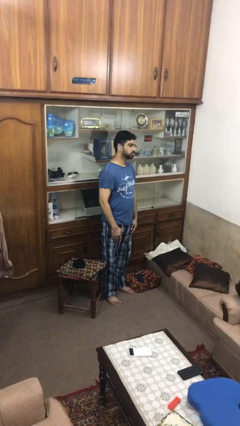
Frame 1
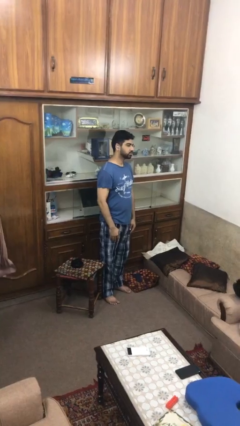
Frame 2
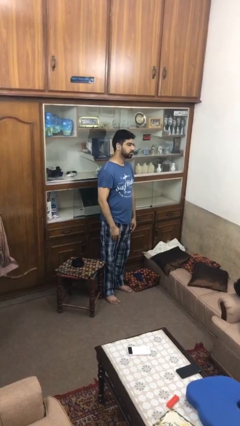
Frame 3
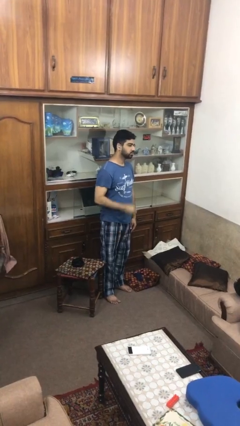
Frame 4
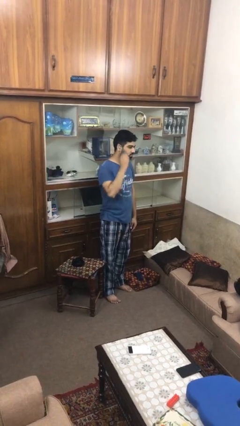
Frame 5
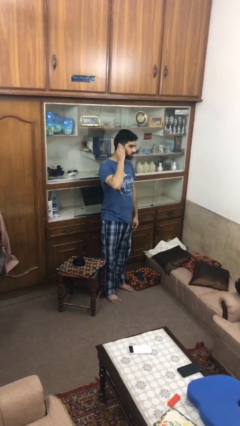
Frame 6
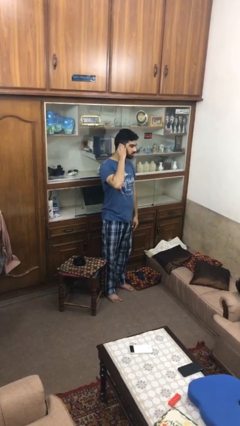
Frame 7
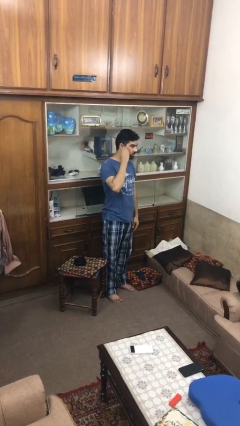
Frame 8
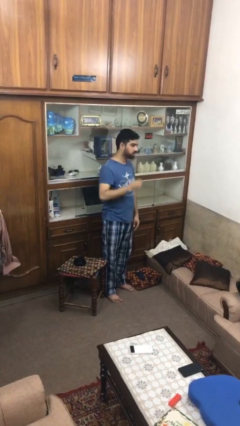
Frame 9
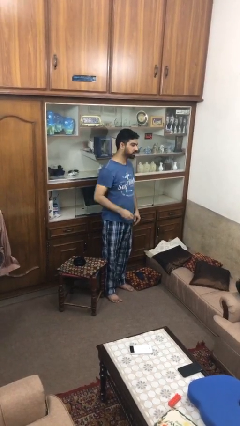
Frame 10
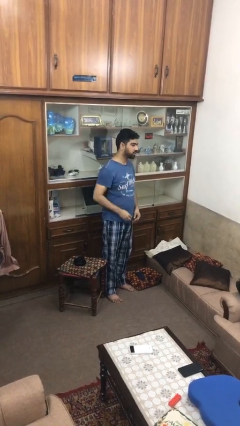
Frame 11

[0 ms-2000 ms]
person takes off earrings

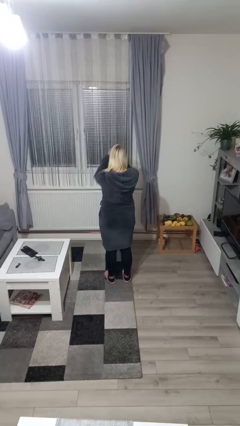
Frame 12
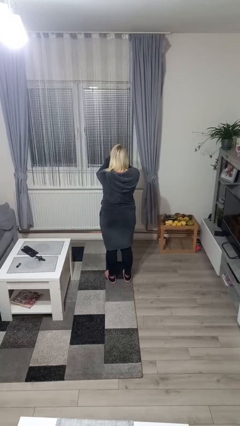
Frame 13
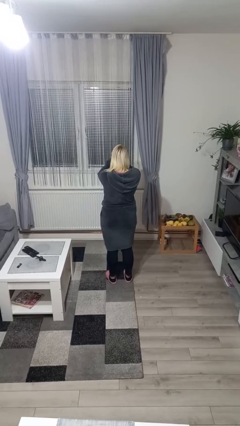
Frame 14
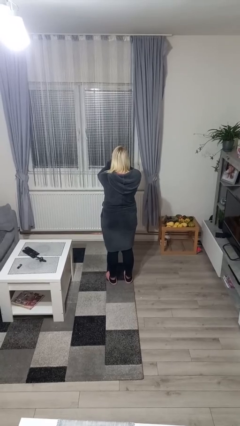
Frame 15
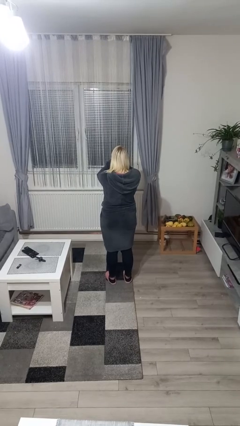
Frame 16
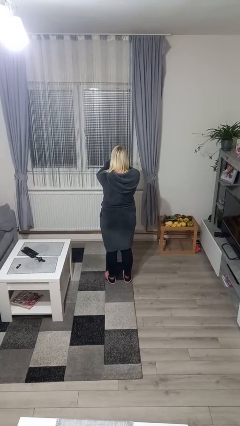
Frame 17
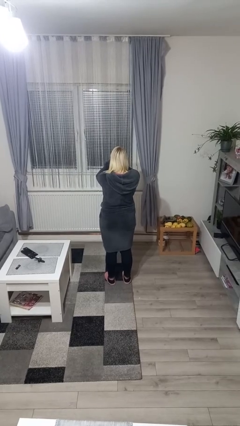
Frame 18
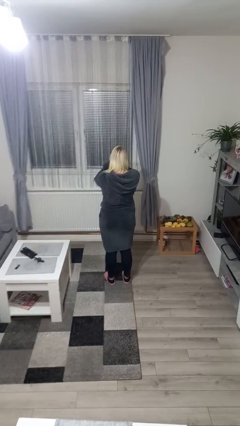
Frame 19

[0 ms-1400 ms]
person covers face with hands

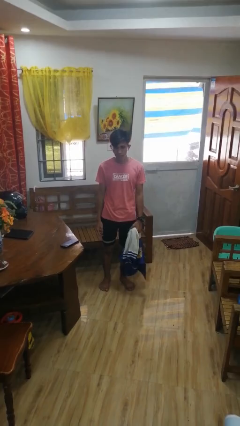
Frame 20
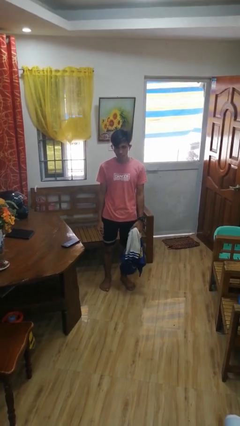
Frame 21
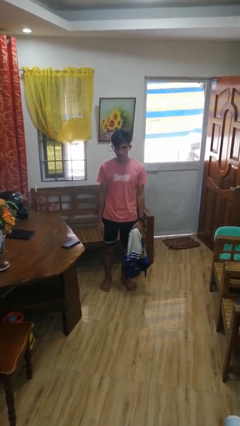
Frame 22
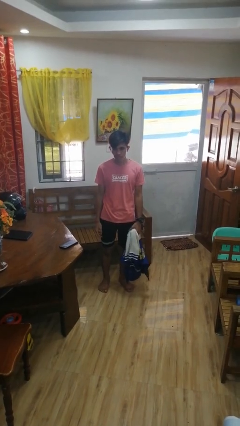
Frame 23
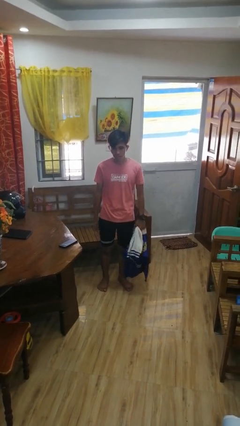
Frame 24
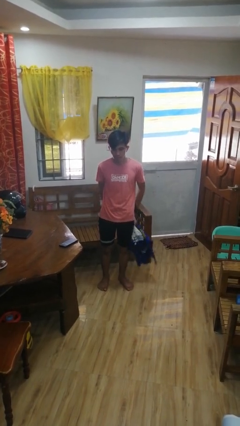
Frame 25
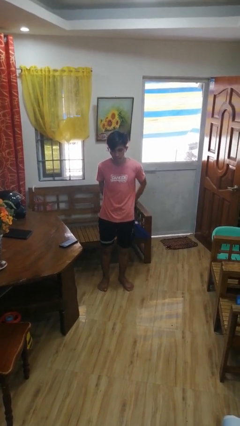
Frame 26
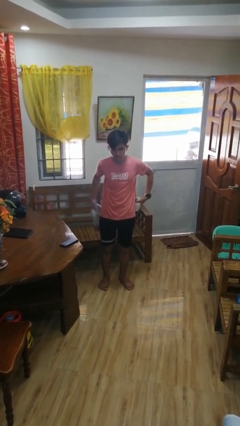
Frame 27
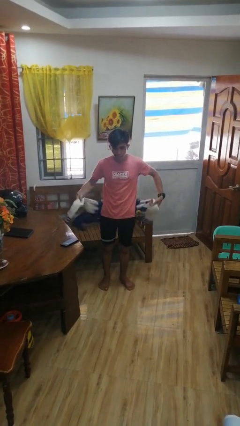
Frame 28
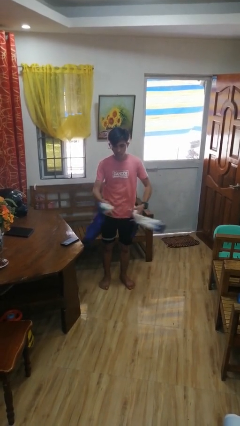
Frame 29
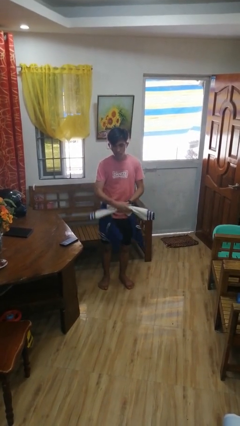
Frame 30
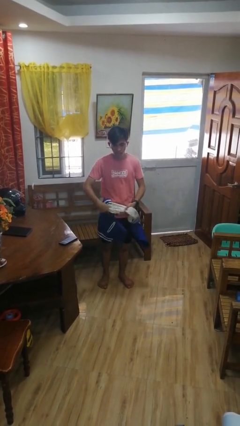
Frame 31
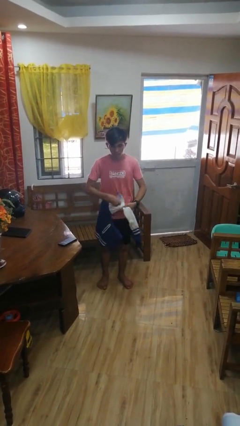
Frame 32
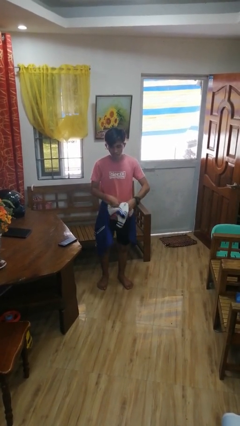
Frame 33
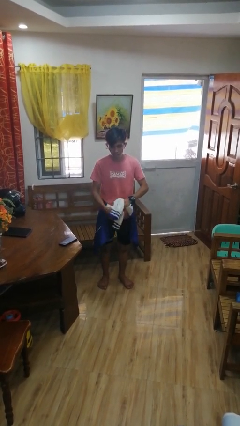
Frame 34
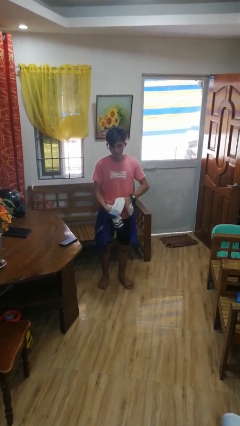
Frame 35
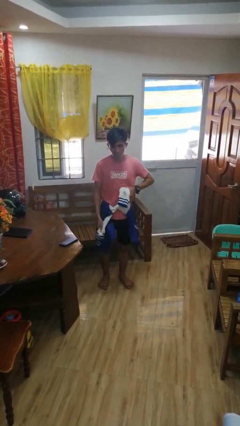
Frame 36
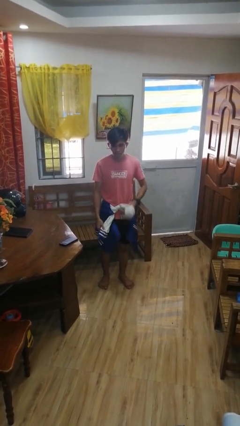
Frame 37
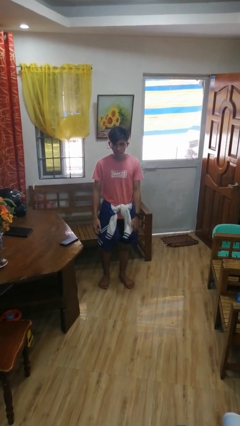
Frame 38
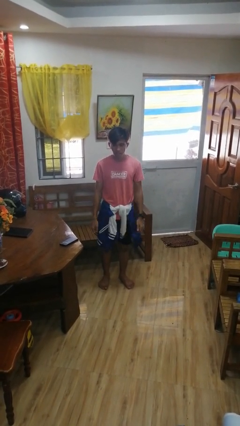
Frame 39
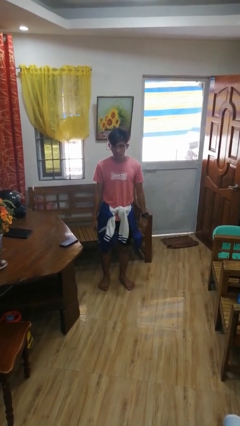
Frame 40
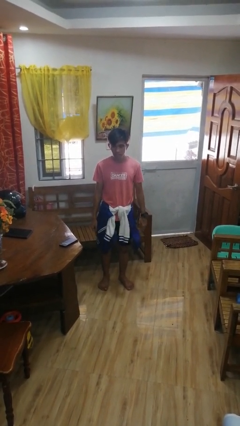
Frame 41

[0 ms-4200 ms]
person ties jacket around waist

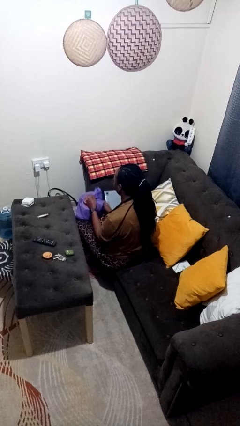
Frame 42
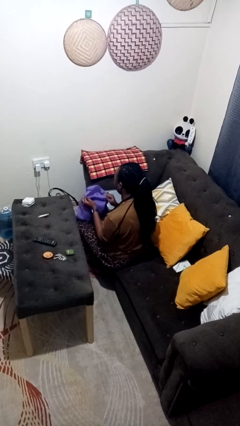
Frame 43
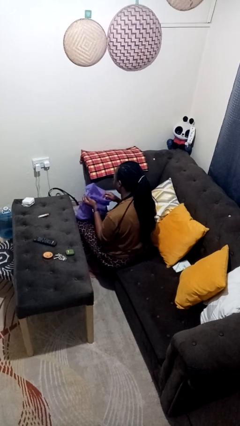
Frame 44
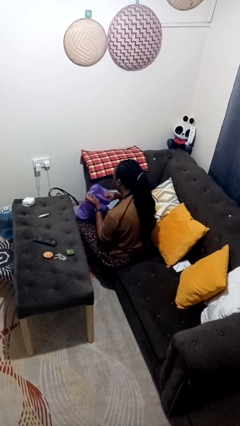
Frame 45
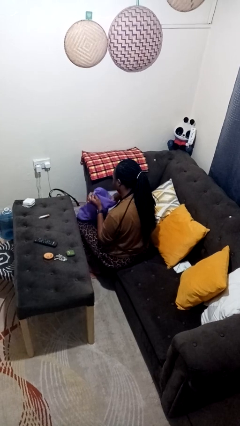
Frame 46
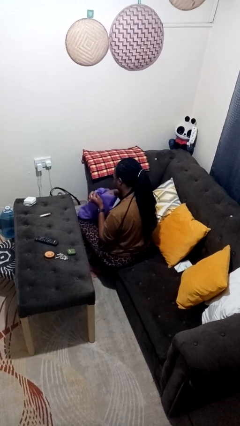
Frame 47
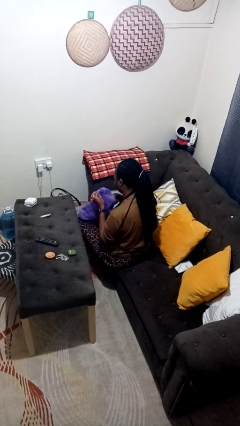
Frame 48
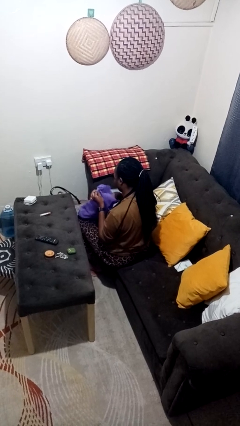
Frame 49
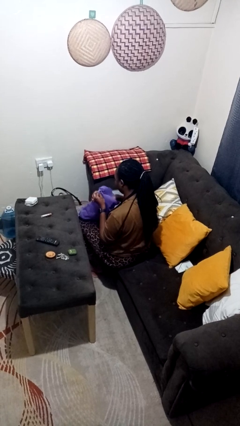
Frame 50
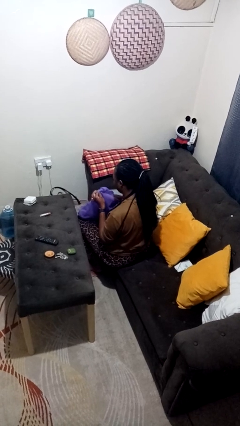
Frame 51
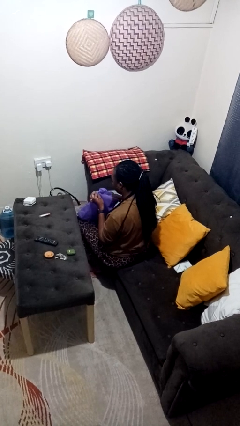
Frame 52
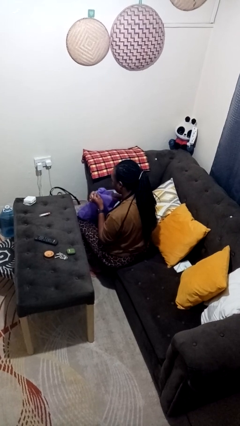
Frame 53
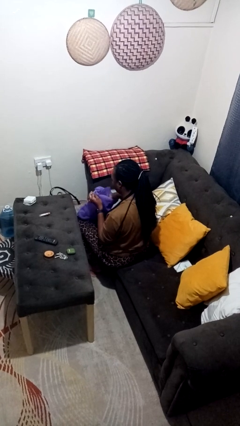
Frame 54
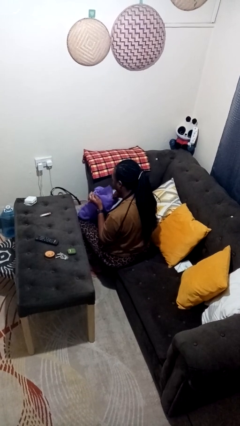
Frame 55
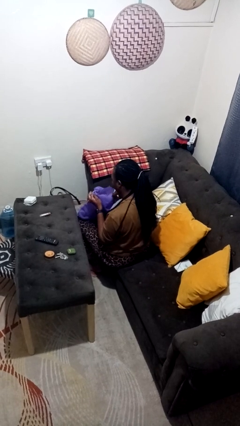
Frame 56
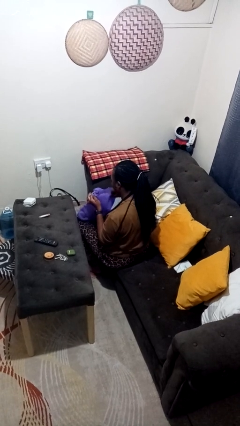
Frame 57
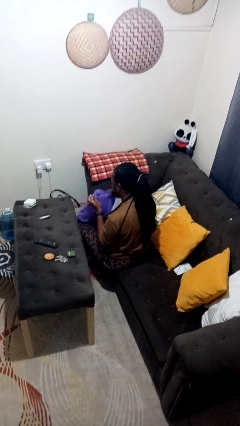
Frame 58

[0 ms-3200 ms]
person searches in bag

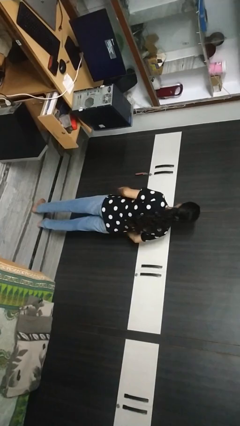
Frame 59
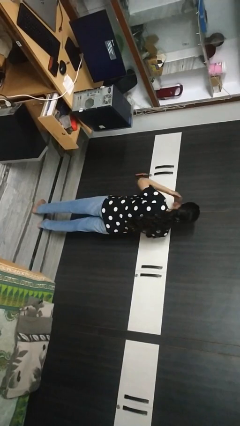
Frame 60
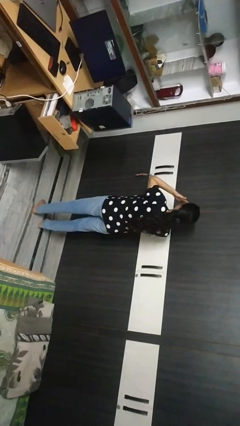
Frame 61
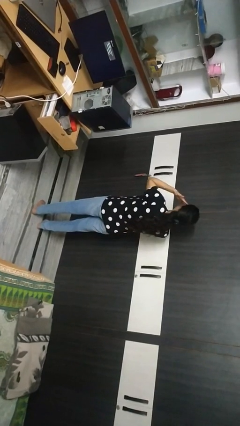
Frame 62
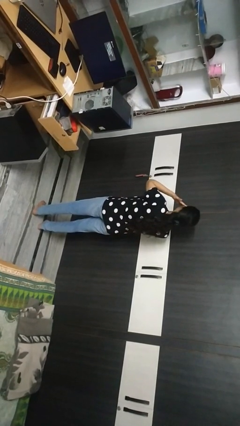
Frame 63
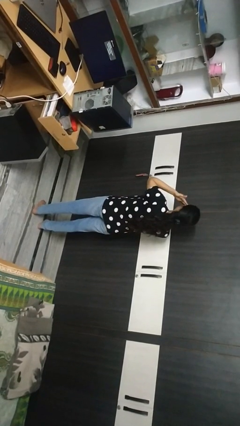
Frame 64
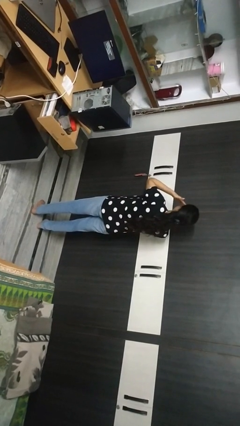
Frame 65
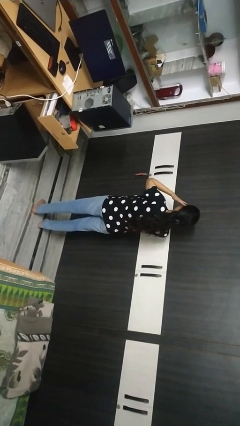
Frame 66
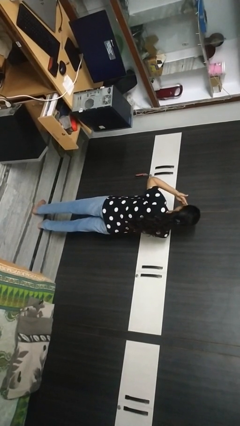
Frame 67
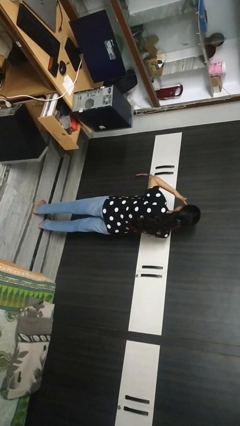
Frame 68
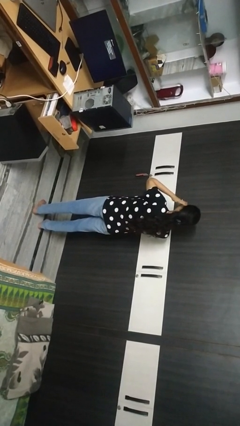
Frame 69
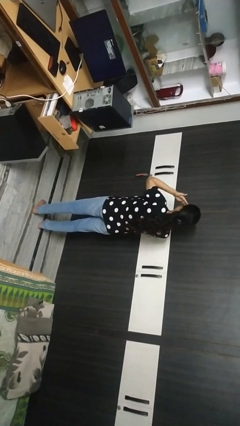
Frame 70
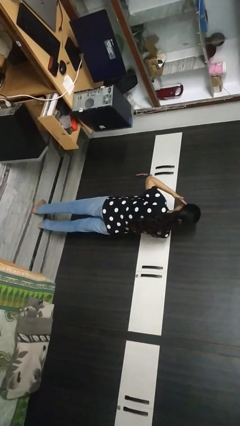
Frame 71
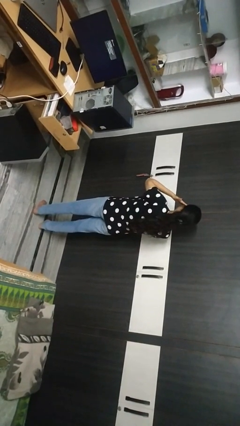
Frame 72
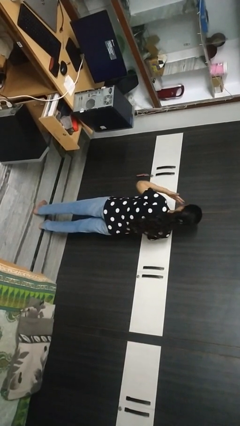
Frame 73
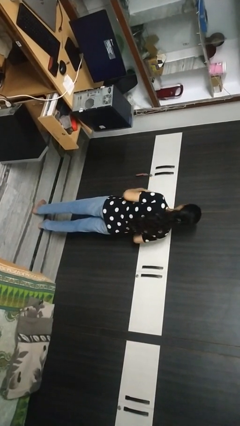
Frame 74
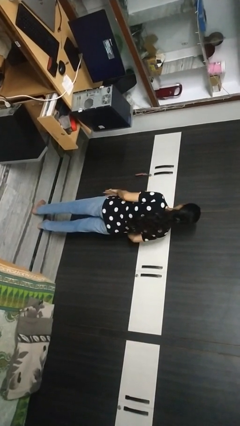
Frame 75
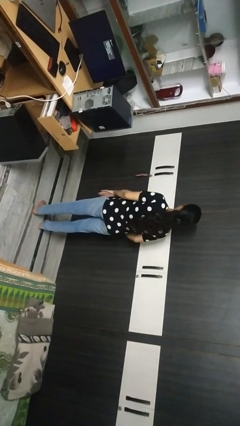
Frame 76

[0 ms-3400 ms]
person rubs eyes

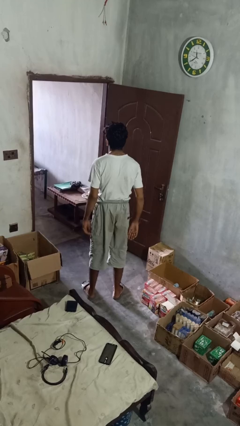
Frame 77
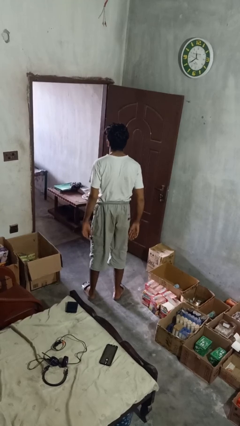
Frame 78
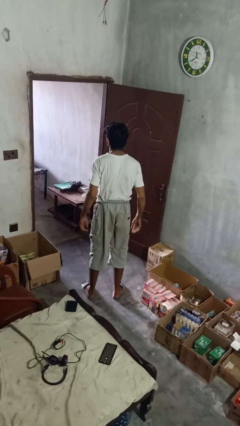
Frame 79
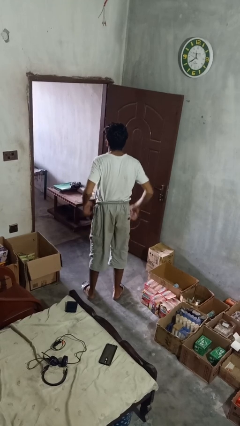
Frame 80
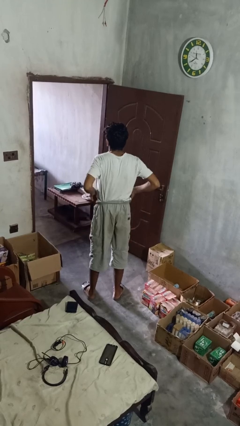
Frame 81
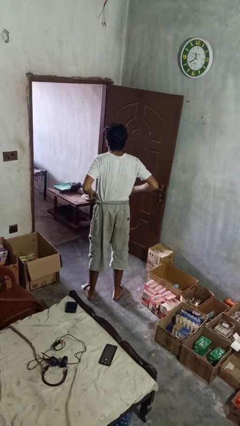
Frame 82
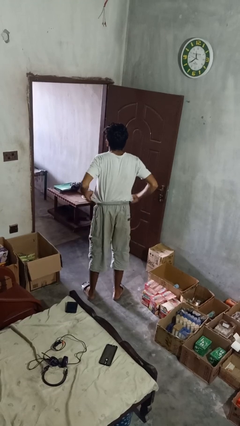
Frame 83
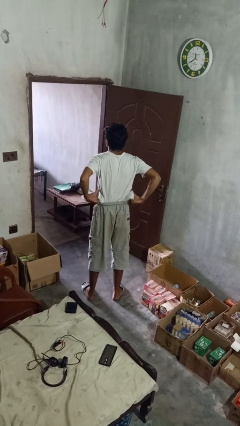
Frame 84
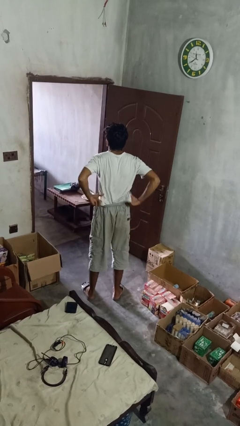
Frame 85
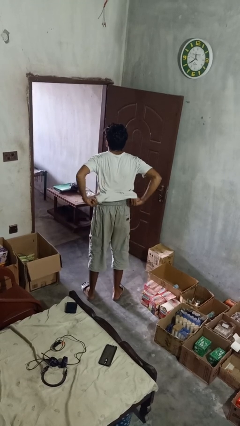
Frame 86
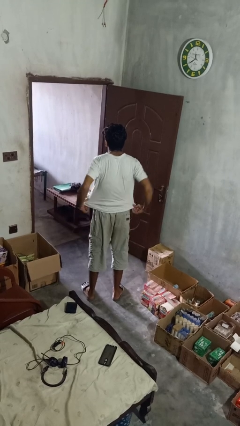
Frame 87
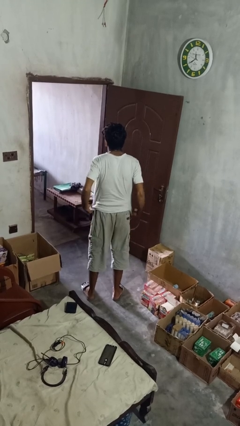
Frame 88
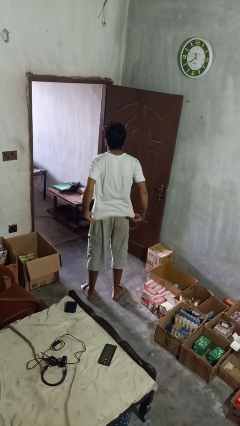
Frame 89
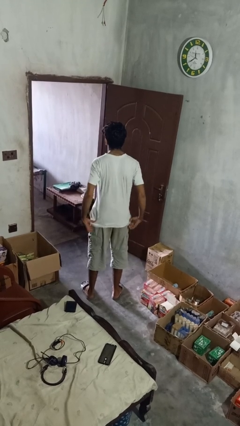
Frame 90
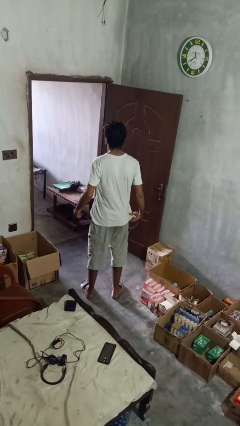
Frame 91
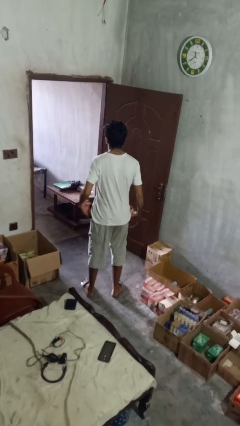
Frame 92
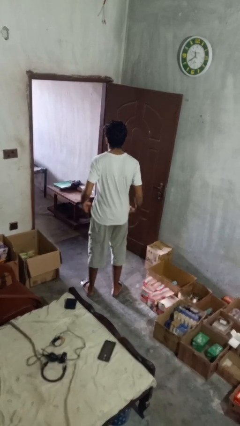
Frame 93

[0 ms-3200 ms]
person untucks shirt
